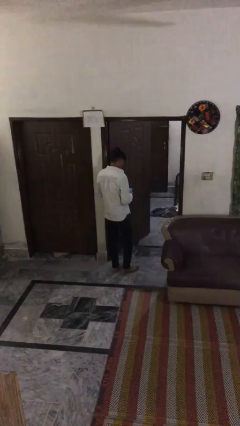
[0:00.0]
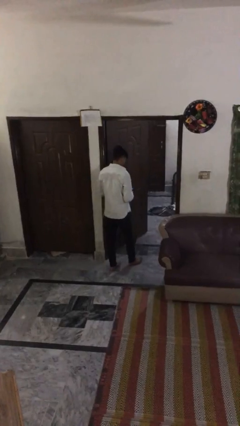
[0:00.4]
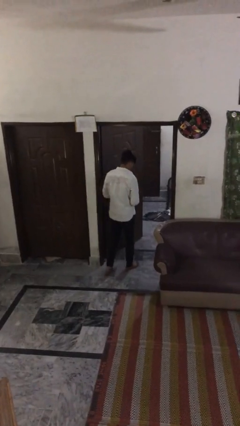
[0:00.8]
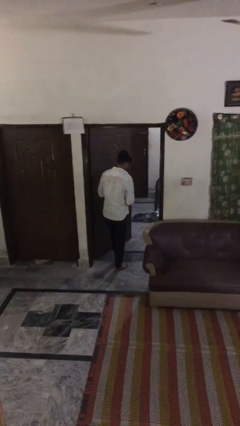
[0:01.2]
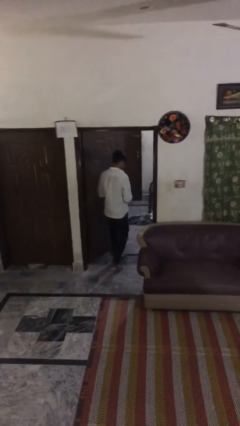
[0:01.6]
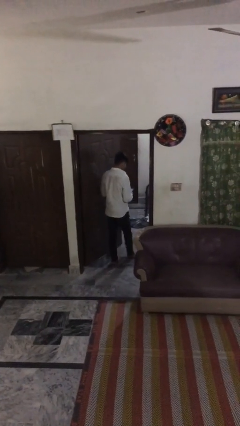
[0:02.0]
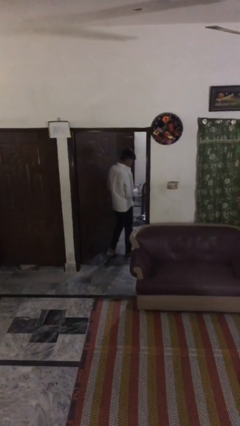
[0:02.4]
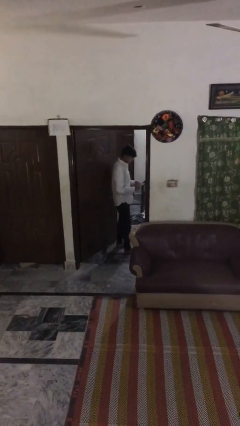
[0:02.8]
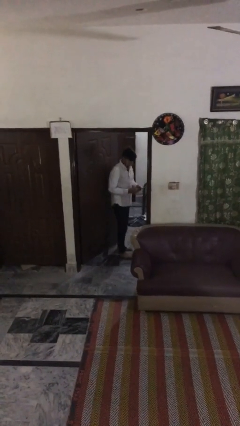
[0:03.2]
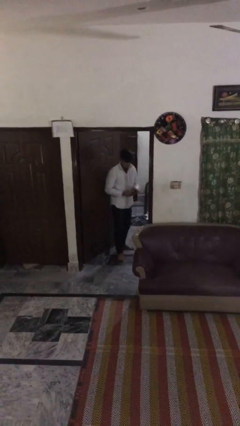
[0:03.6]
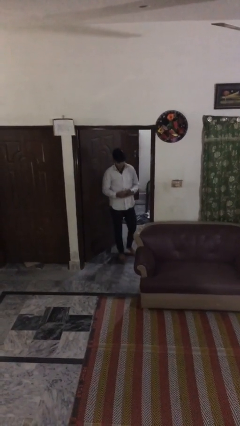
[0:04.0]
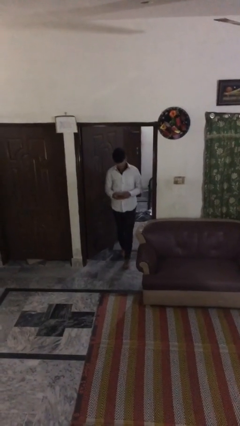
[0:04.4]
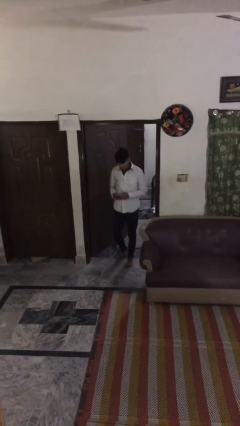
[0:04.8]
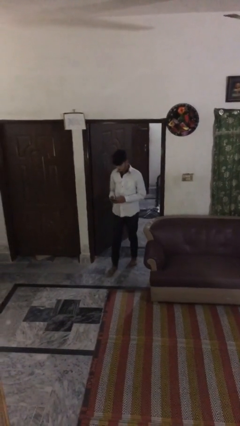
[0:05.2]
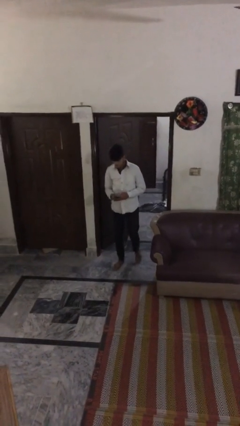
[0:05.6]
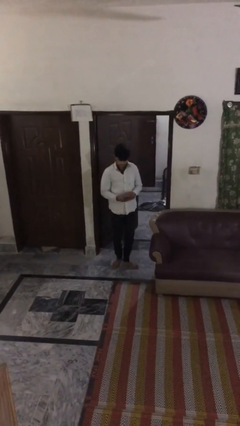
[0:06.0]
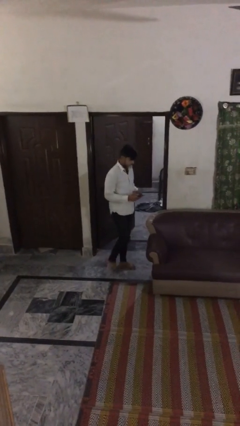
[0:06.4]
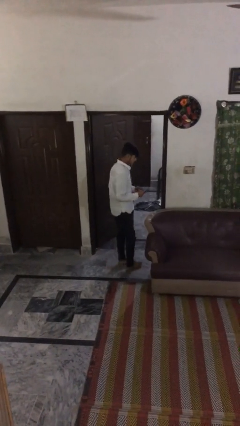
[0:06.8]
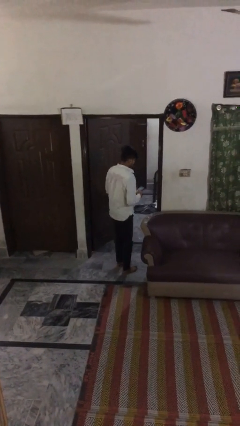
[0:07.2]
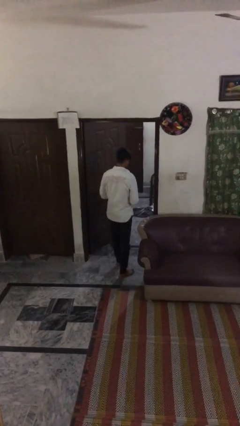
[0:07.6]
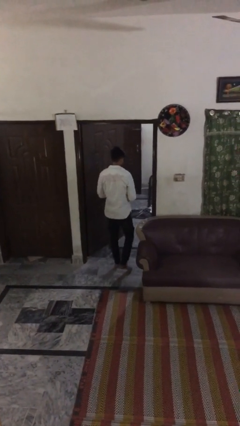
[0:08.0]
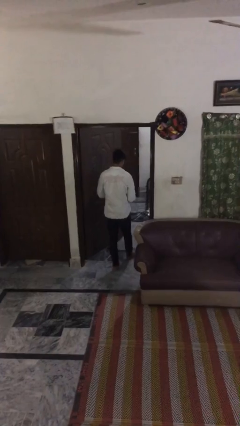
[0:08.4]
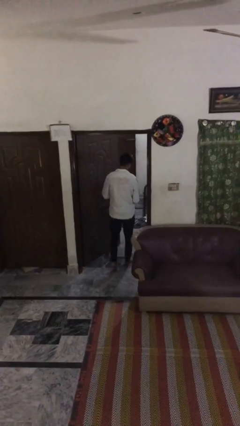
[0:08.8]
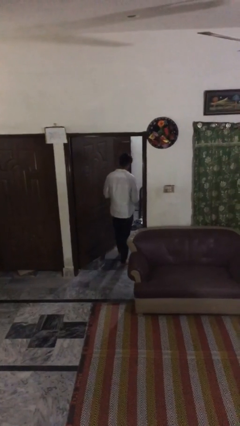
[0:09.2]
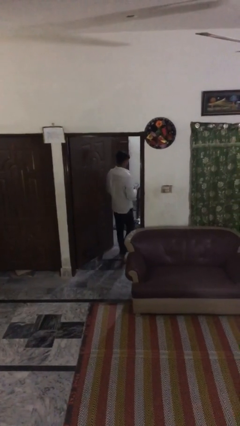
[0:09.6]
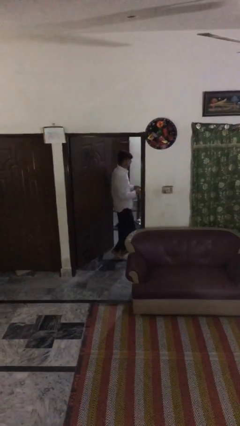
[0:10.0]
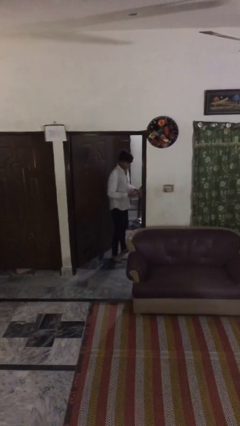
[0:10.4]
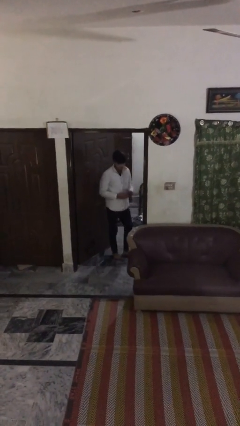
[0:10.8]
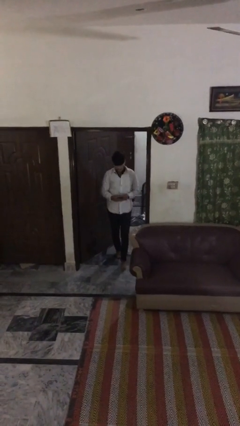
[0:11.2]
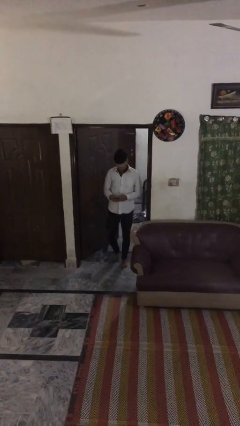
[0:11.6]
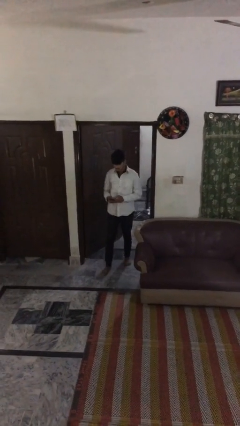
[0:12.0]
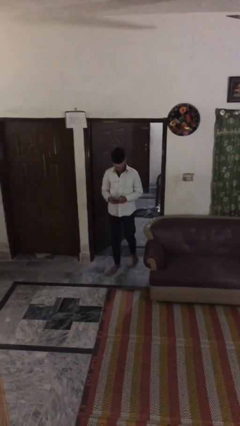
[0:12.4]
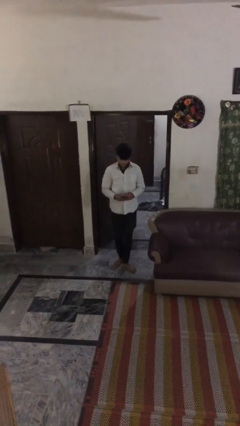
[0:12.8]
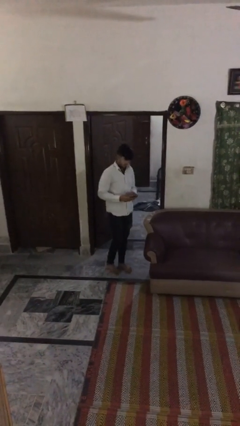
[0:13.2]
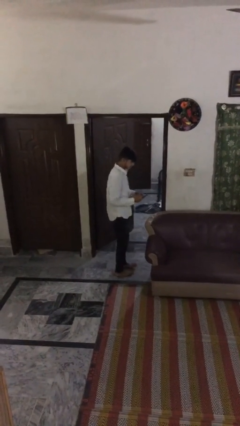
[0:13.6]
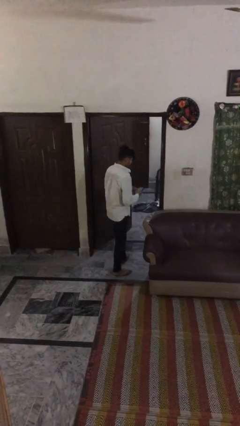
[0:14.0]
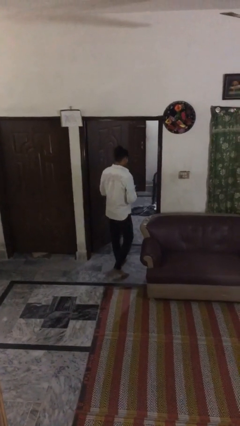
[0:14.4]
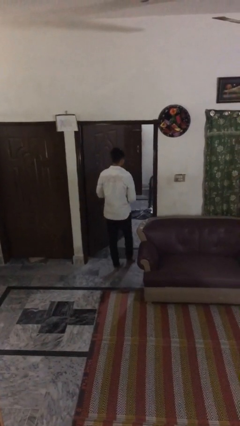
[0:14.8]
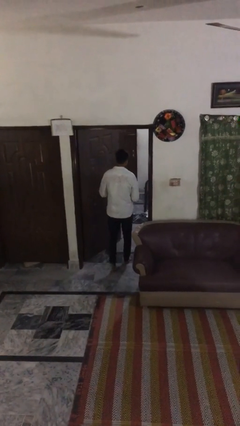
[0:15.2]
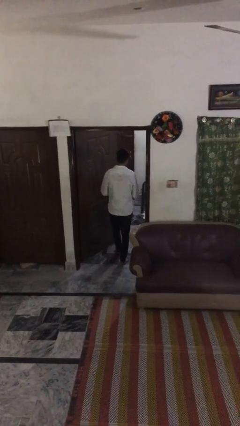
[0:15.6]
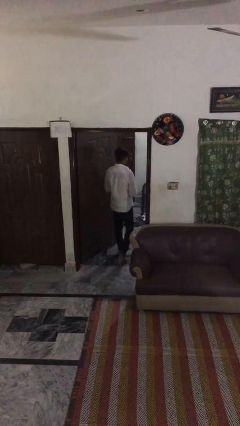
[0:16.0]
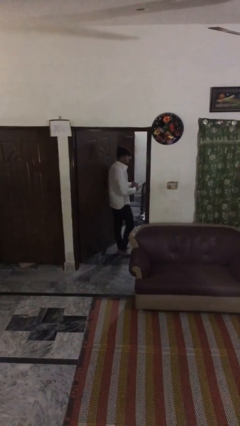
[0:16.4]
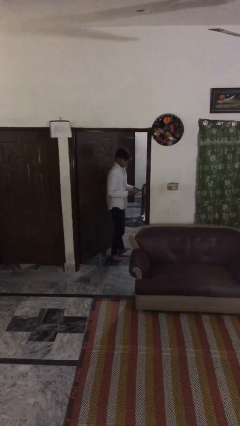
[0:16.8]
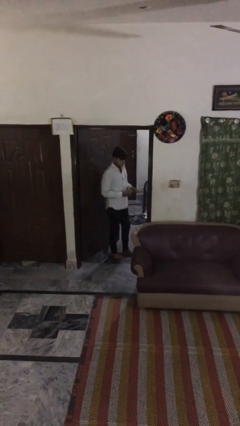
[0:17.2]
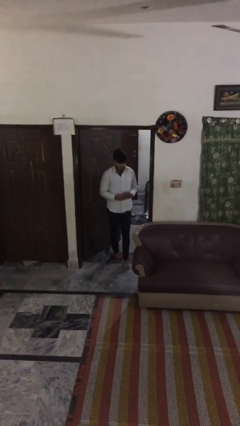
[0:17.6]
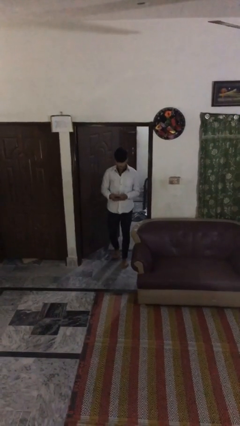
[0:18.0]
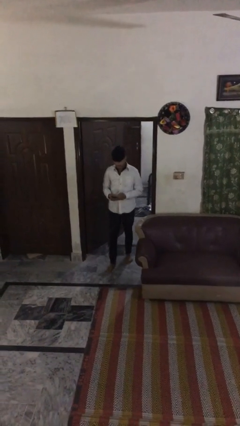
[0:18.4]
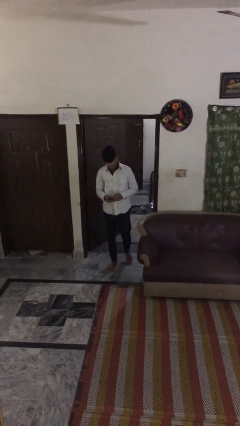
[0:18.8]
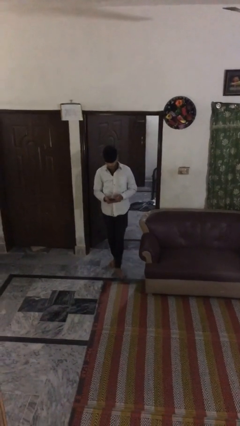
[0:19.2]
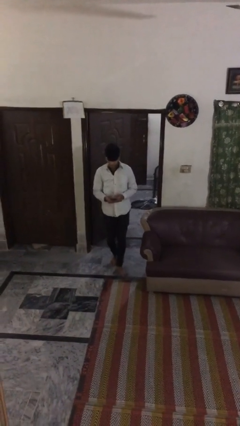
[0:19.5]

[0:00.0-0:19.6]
person texts on phone

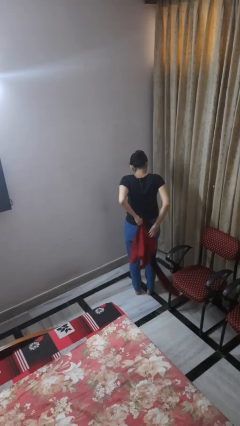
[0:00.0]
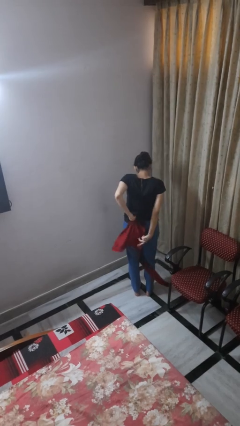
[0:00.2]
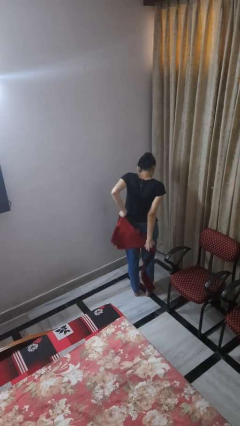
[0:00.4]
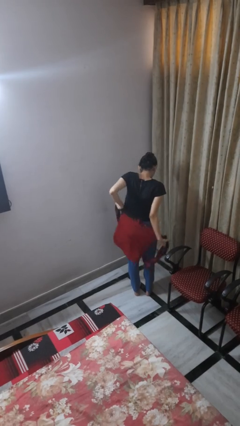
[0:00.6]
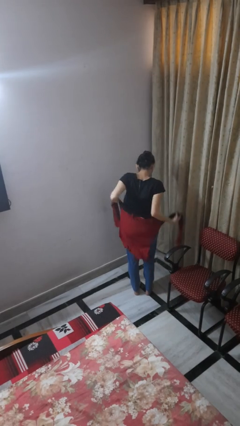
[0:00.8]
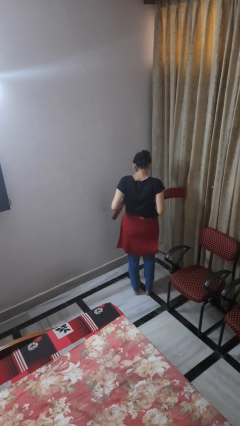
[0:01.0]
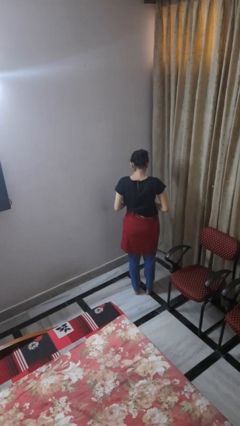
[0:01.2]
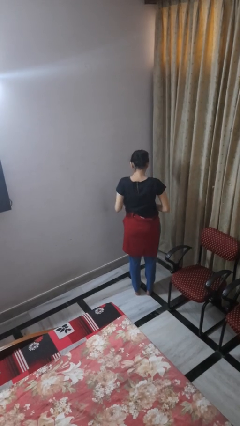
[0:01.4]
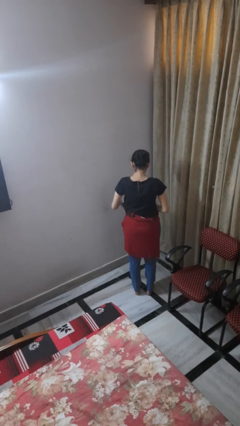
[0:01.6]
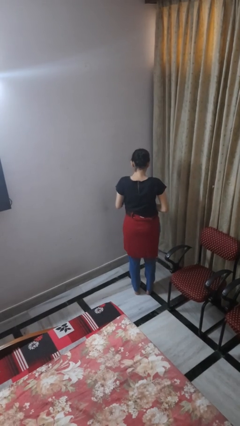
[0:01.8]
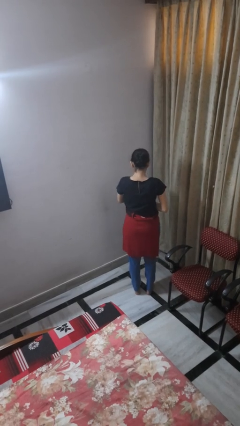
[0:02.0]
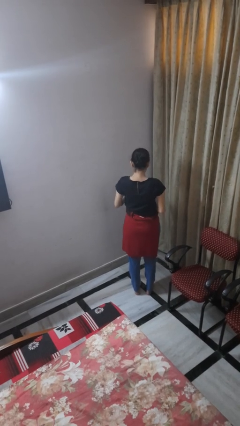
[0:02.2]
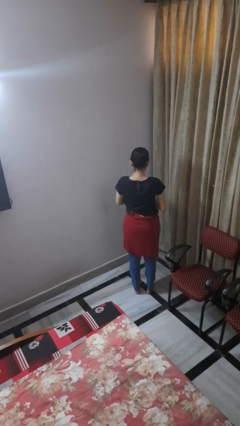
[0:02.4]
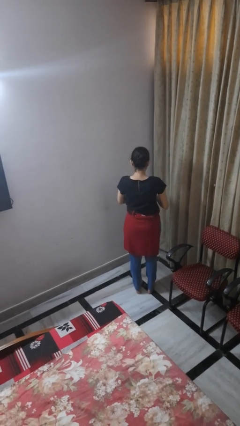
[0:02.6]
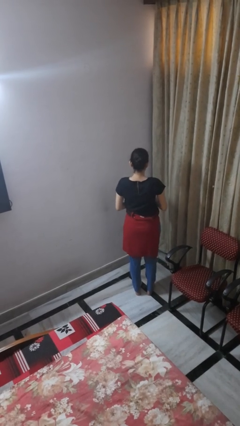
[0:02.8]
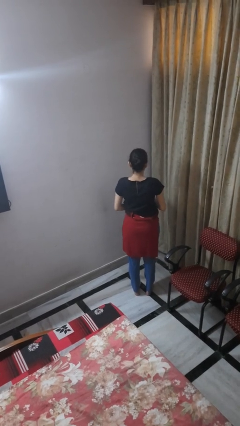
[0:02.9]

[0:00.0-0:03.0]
person ties jacket around waist

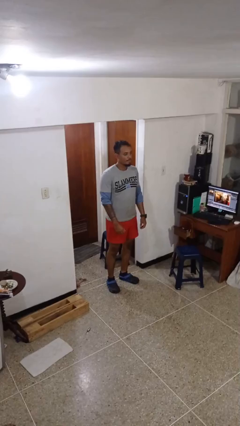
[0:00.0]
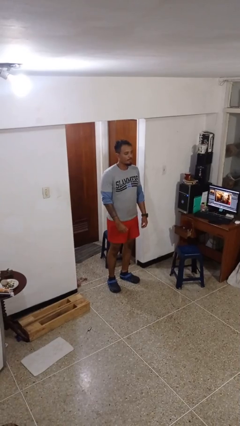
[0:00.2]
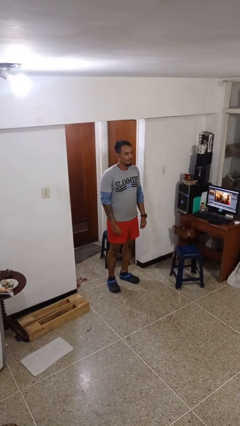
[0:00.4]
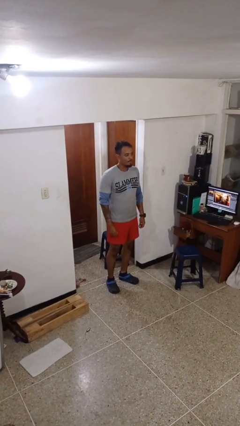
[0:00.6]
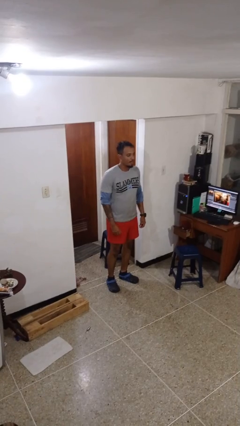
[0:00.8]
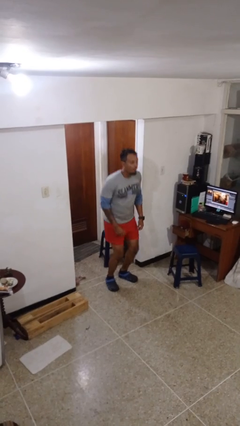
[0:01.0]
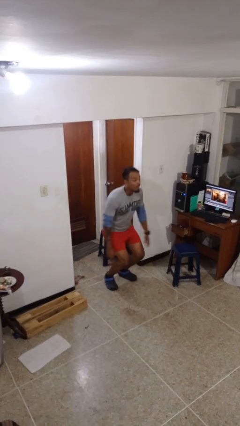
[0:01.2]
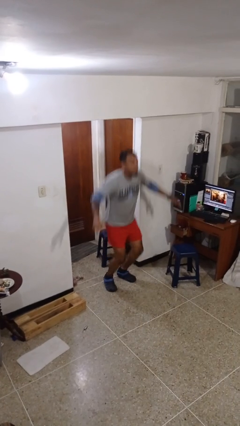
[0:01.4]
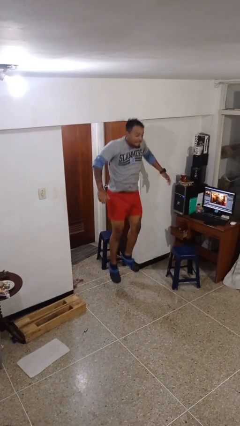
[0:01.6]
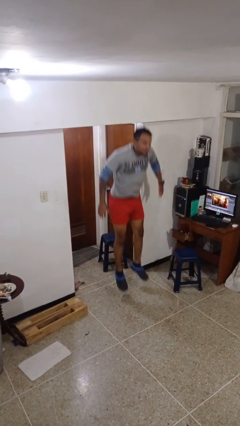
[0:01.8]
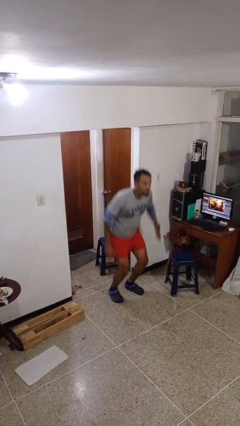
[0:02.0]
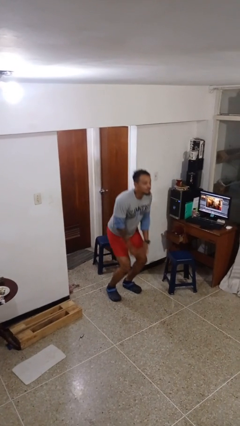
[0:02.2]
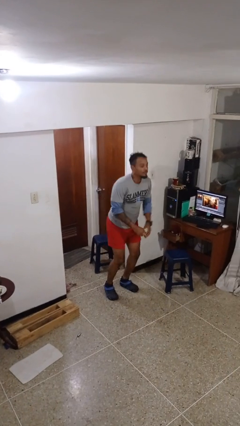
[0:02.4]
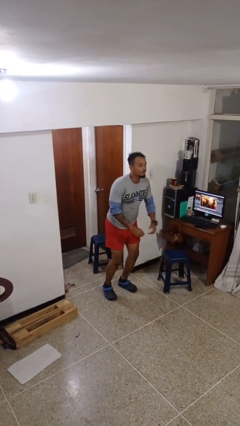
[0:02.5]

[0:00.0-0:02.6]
person jumps

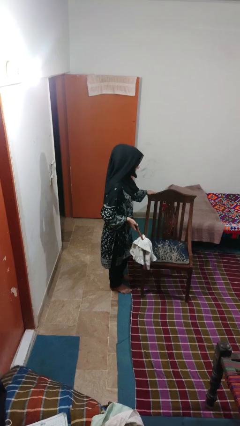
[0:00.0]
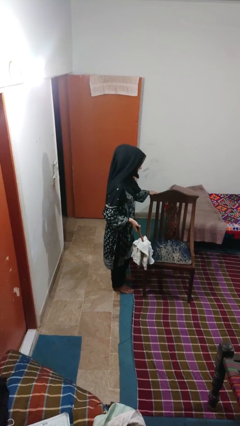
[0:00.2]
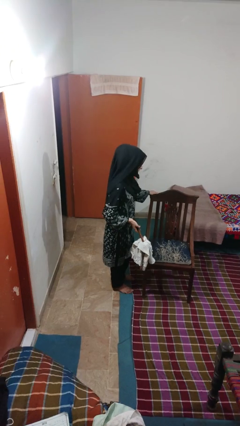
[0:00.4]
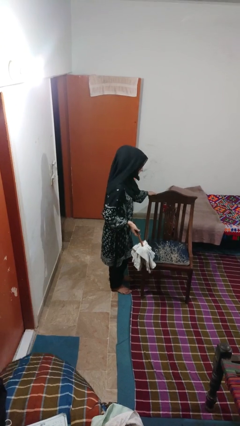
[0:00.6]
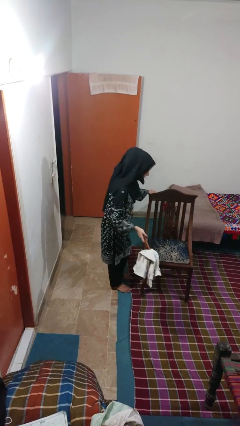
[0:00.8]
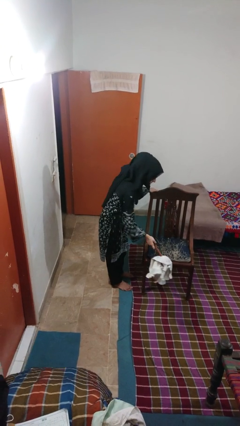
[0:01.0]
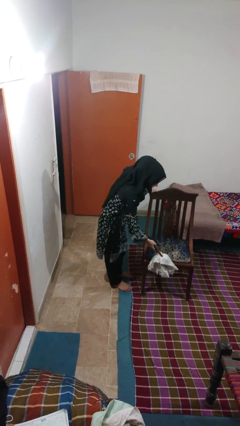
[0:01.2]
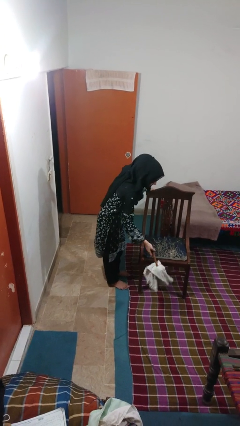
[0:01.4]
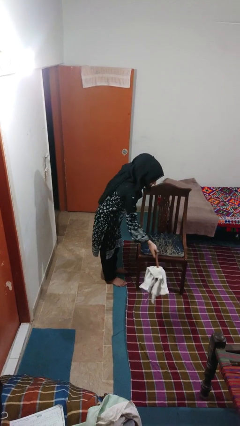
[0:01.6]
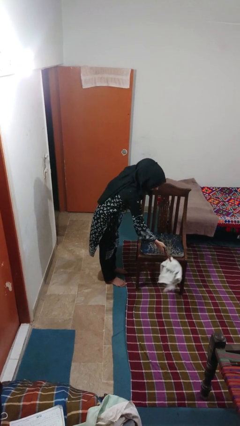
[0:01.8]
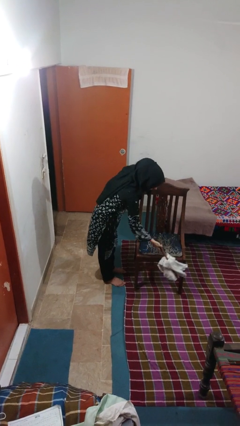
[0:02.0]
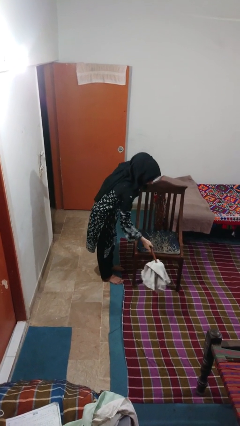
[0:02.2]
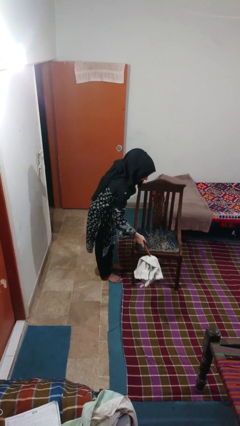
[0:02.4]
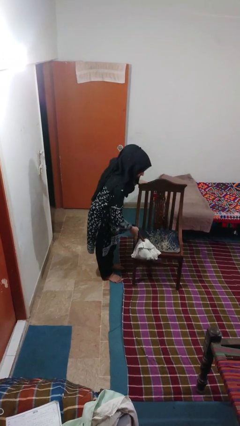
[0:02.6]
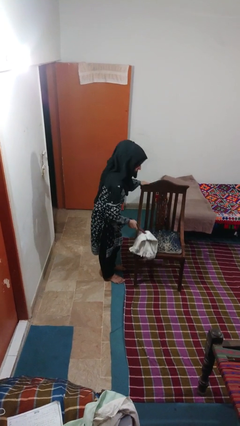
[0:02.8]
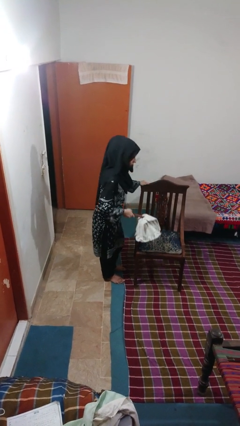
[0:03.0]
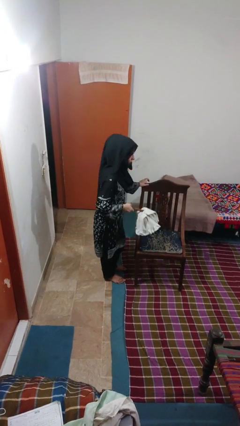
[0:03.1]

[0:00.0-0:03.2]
person dusts furniture
